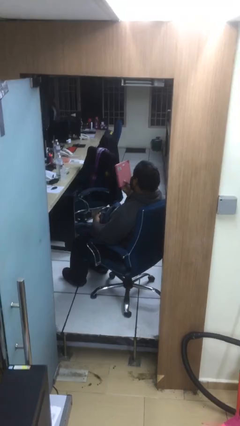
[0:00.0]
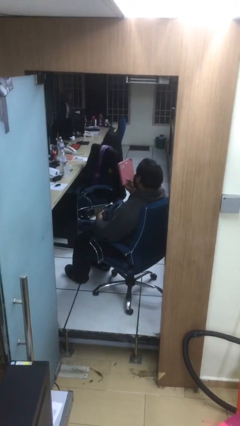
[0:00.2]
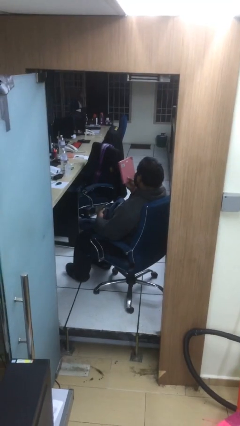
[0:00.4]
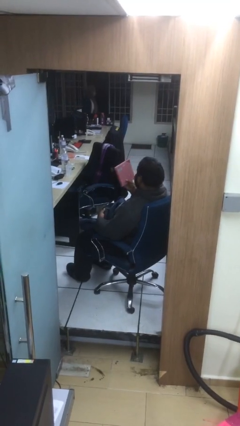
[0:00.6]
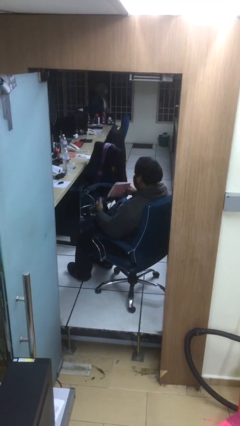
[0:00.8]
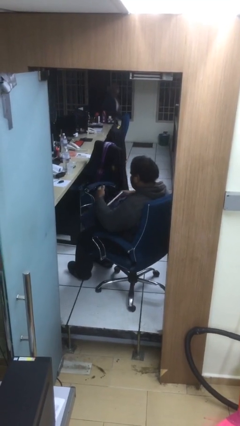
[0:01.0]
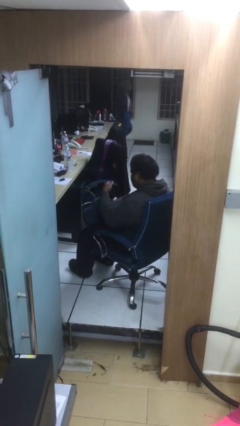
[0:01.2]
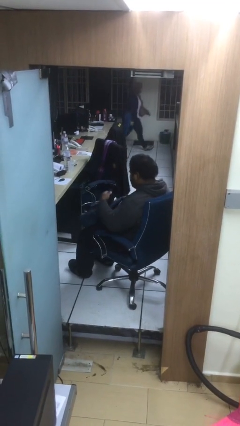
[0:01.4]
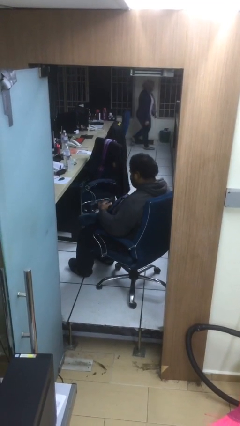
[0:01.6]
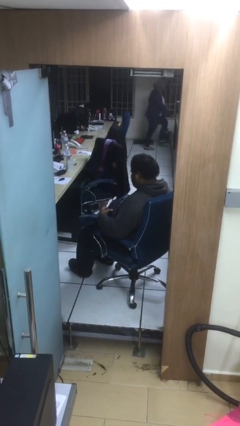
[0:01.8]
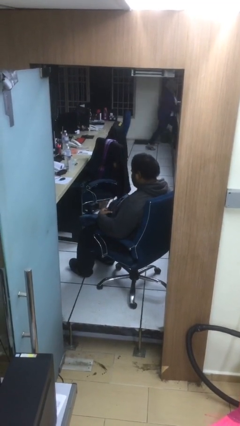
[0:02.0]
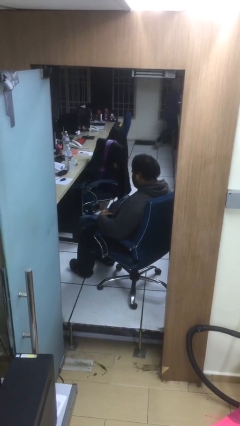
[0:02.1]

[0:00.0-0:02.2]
person puts object into backpack

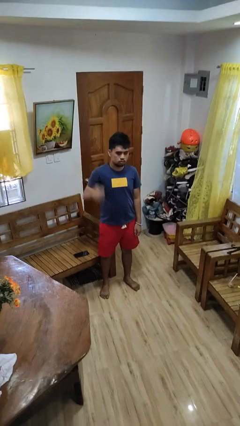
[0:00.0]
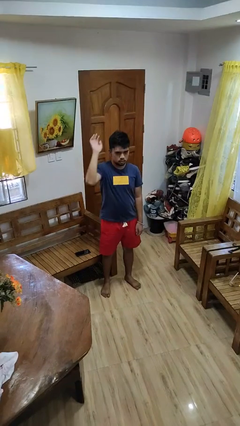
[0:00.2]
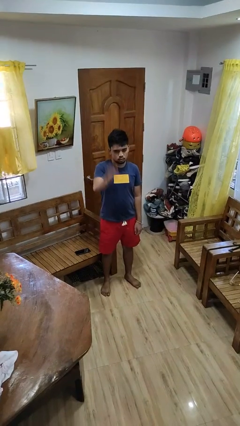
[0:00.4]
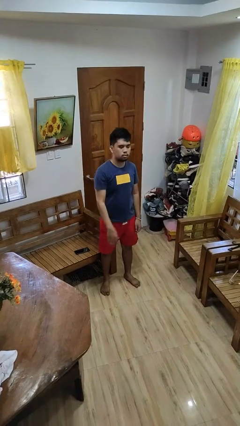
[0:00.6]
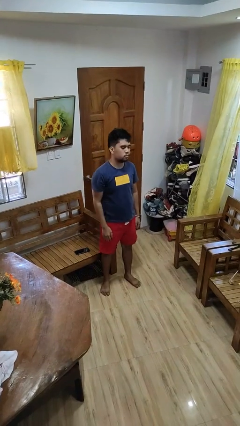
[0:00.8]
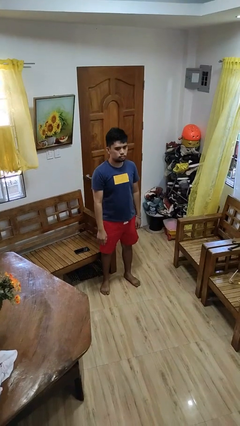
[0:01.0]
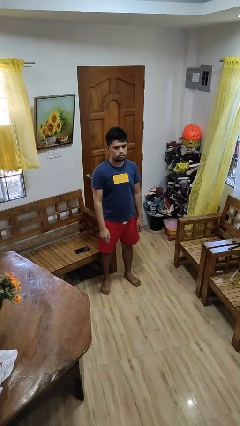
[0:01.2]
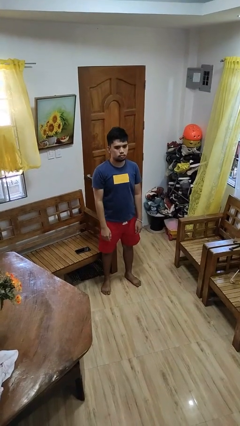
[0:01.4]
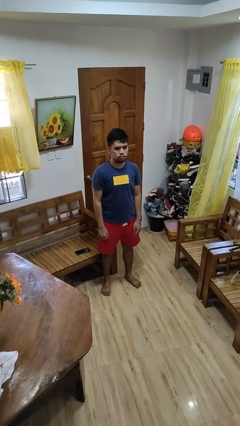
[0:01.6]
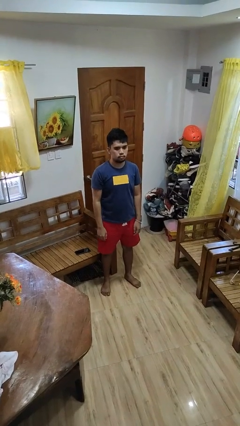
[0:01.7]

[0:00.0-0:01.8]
person gestures swipe down

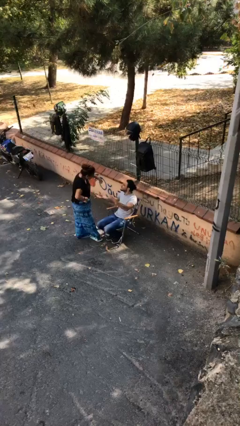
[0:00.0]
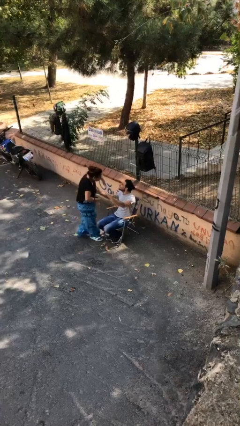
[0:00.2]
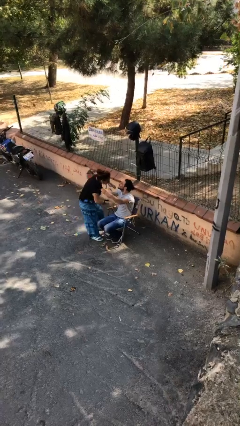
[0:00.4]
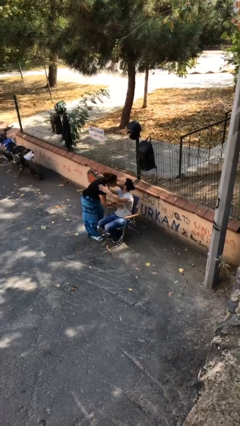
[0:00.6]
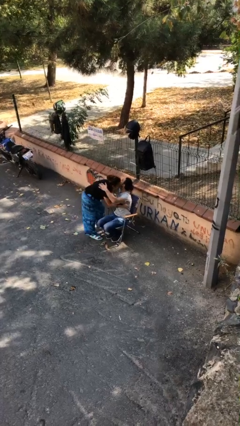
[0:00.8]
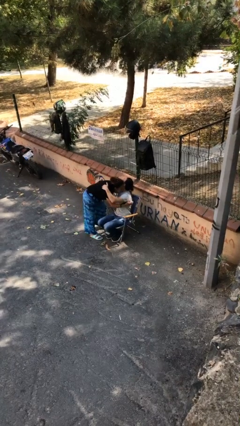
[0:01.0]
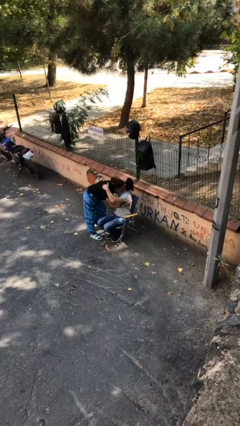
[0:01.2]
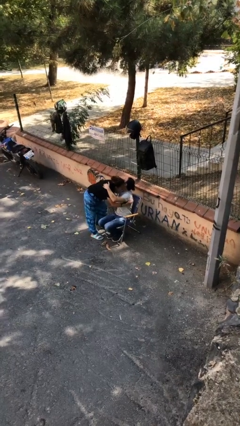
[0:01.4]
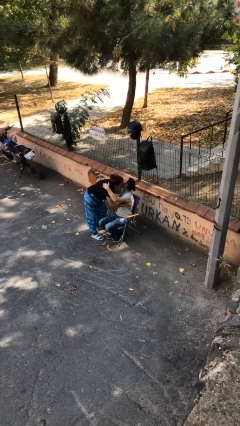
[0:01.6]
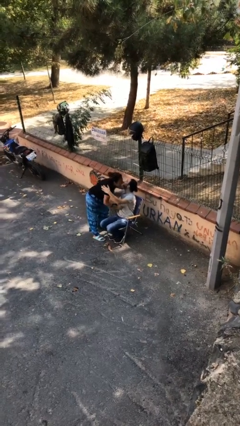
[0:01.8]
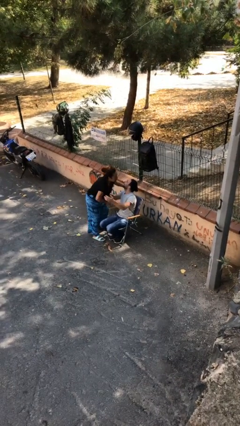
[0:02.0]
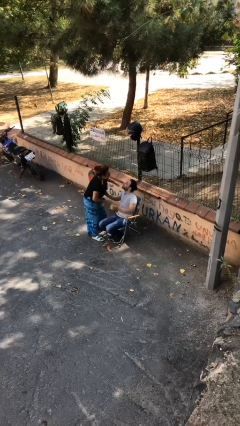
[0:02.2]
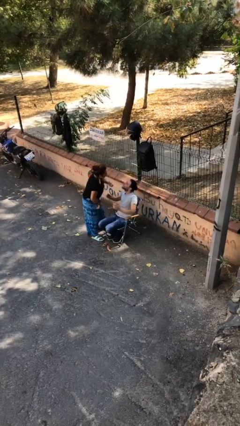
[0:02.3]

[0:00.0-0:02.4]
person embraces person

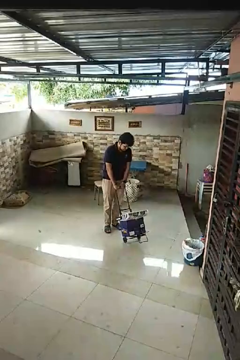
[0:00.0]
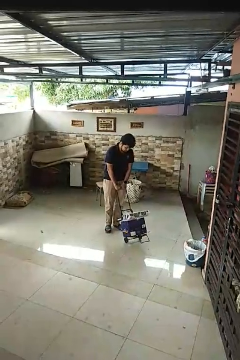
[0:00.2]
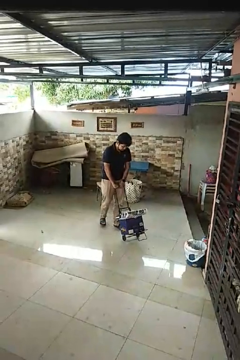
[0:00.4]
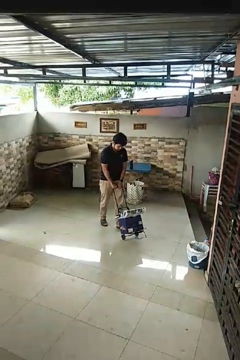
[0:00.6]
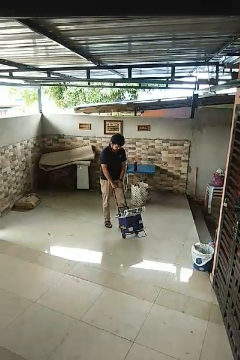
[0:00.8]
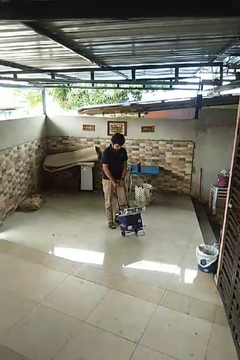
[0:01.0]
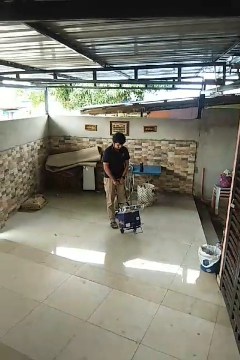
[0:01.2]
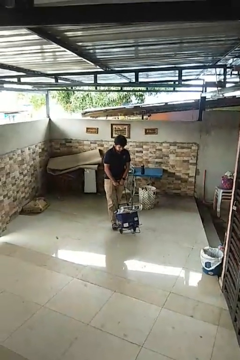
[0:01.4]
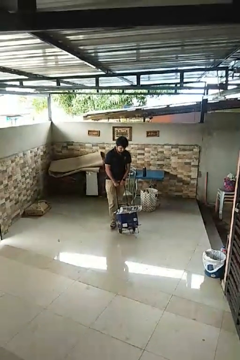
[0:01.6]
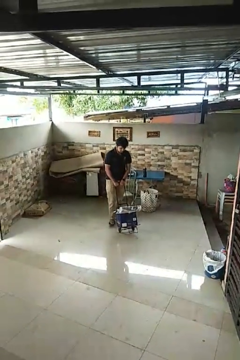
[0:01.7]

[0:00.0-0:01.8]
person pulls wheeled cart

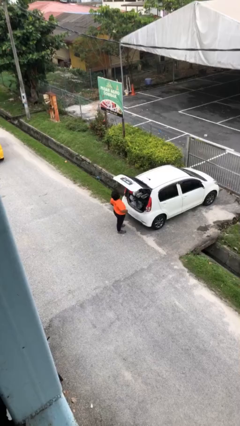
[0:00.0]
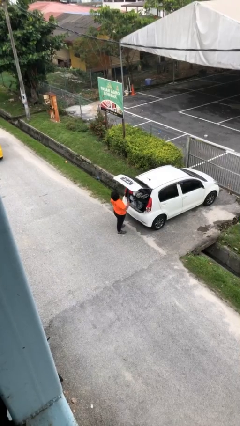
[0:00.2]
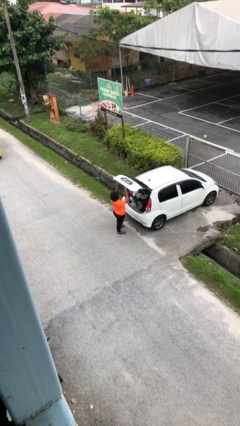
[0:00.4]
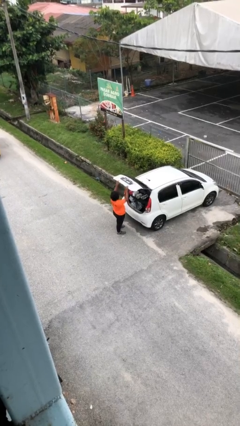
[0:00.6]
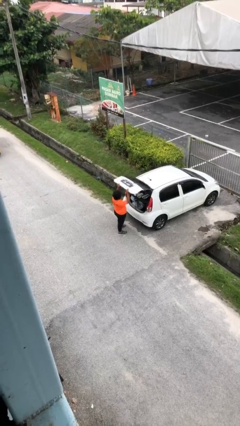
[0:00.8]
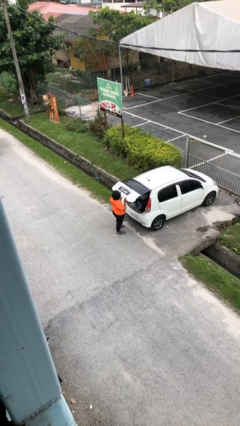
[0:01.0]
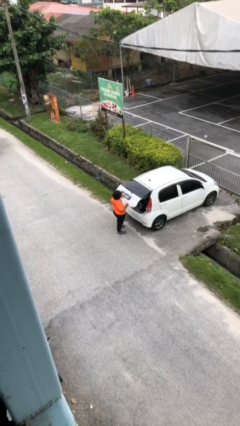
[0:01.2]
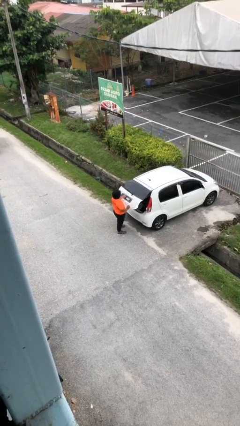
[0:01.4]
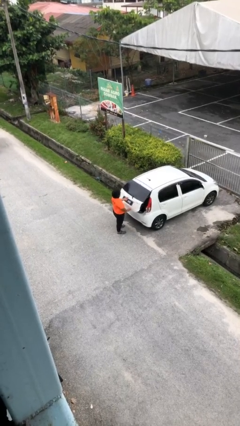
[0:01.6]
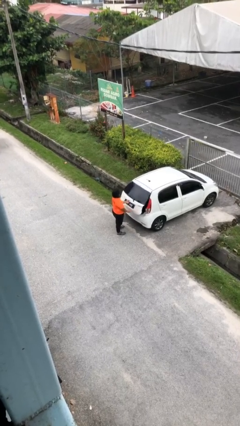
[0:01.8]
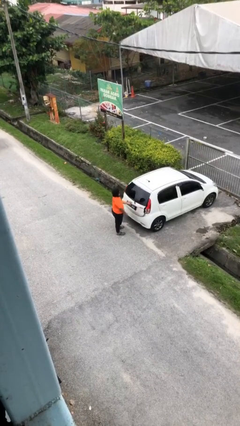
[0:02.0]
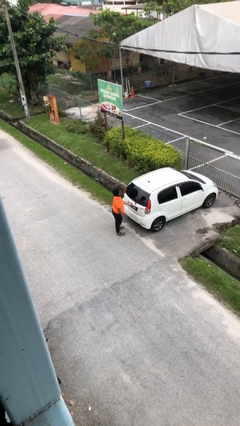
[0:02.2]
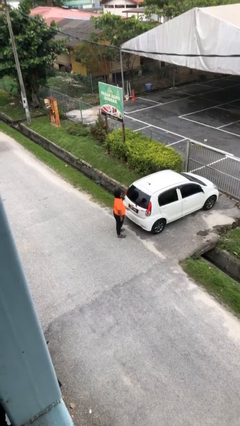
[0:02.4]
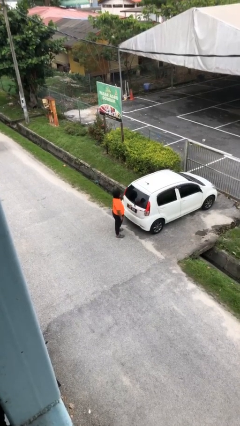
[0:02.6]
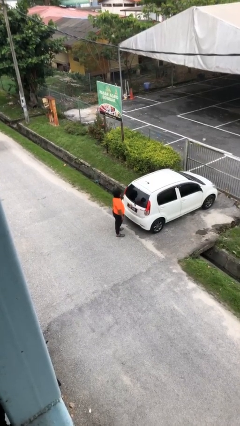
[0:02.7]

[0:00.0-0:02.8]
person closes car trunk

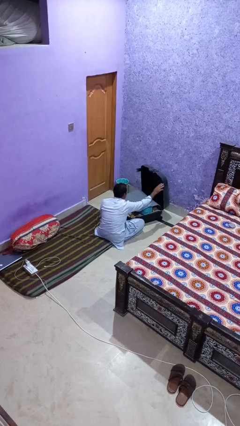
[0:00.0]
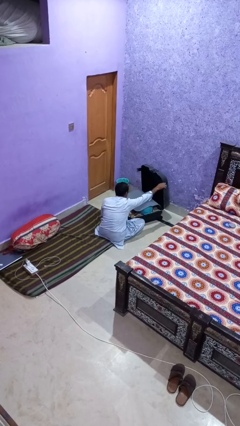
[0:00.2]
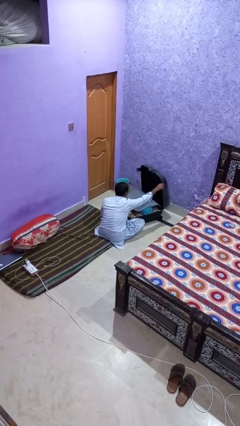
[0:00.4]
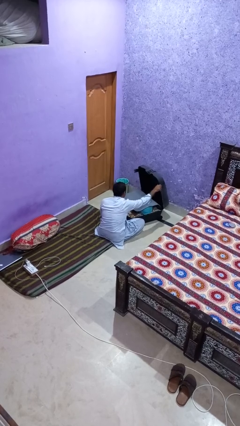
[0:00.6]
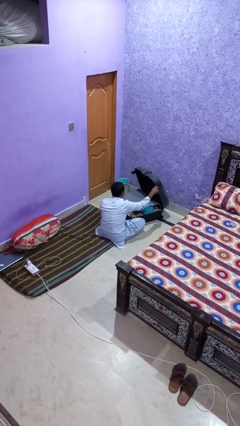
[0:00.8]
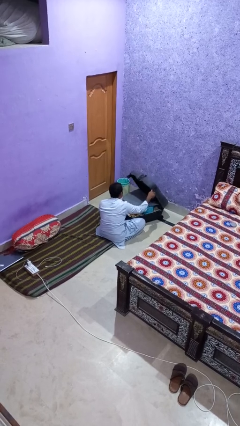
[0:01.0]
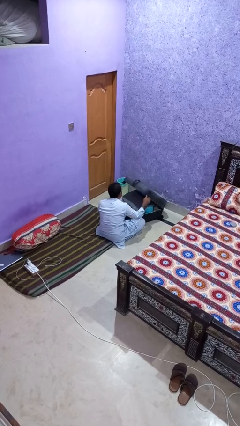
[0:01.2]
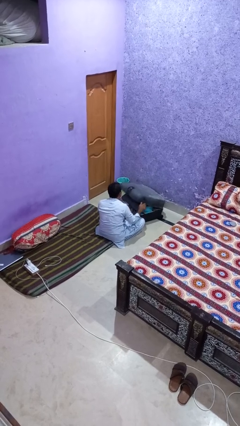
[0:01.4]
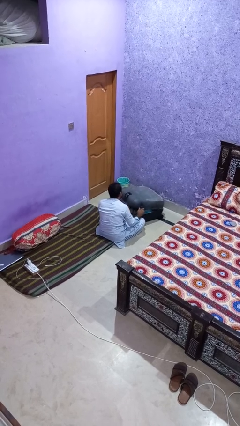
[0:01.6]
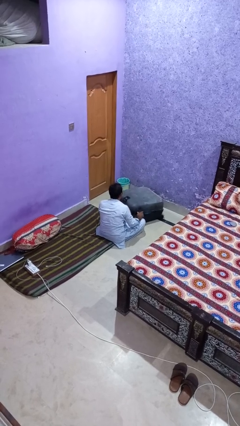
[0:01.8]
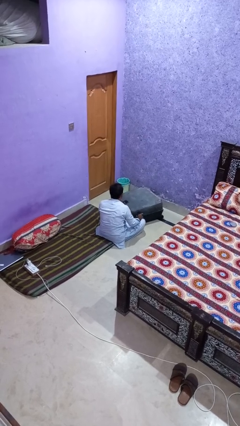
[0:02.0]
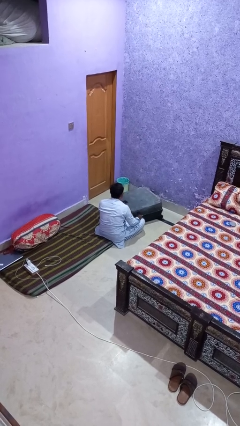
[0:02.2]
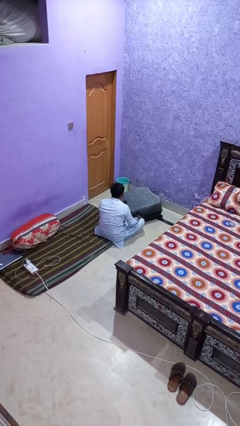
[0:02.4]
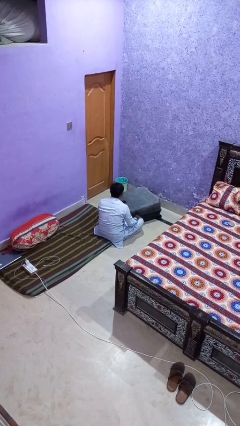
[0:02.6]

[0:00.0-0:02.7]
person closes suitcase

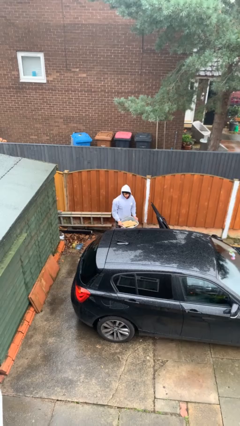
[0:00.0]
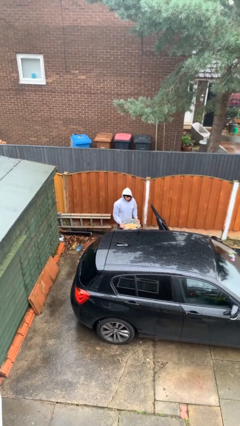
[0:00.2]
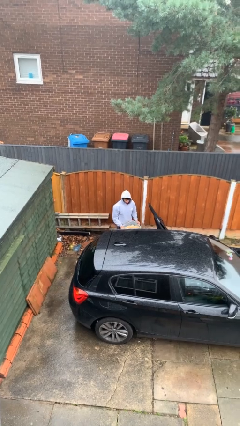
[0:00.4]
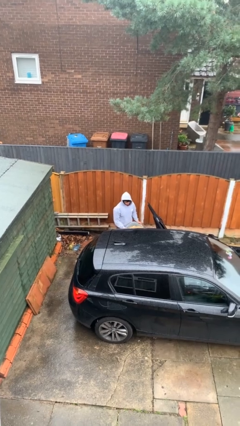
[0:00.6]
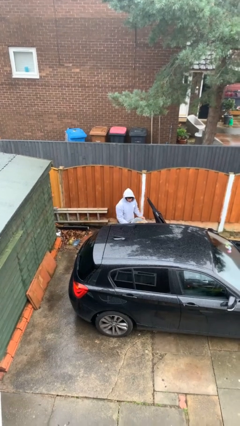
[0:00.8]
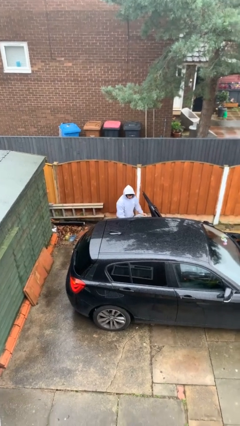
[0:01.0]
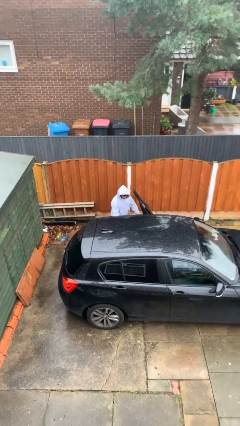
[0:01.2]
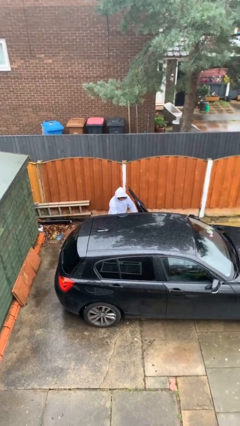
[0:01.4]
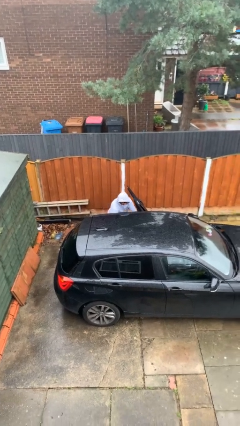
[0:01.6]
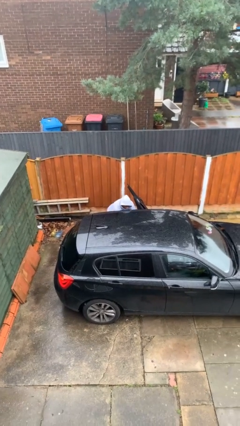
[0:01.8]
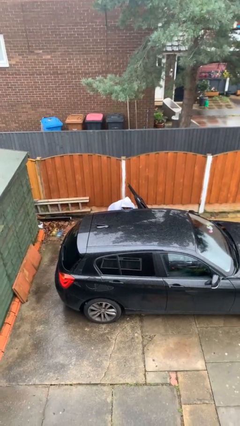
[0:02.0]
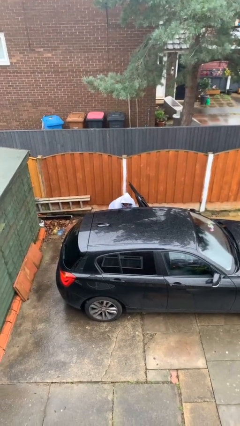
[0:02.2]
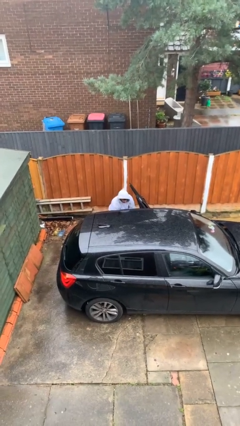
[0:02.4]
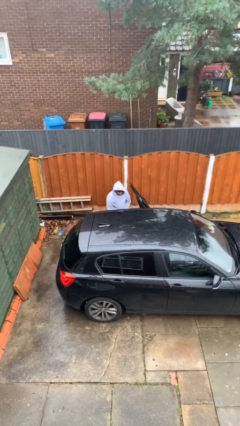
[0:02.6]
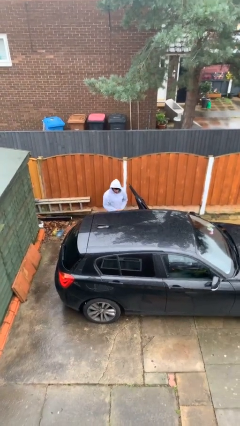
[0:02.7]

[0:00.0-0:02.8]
person loads car

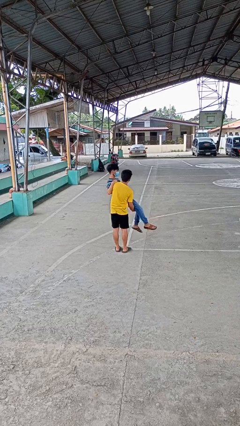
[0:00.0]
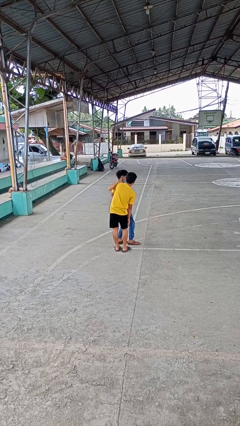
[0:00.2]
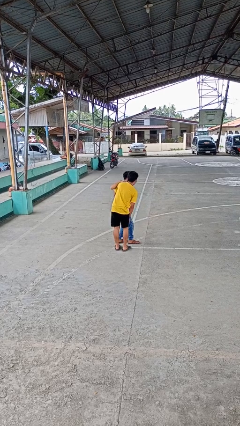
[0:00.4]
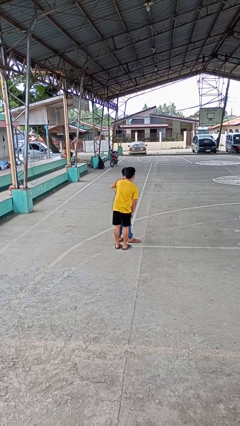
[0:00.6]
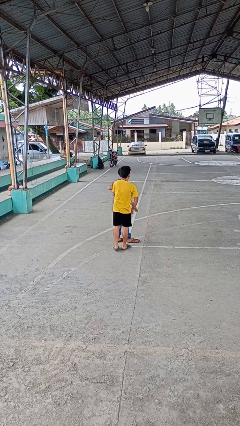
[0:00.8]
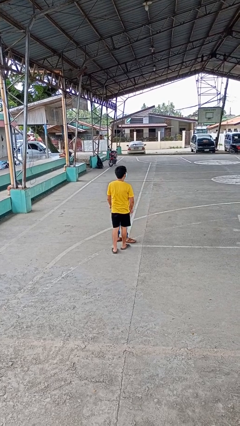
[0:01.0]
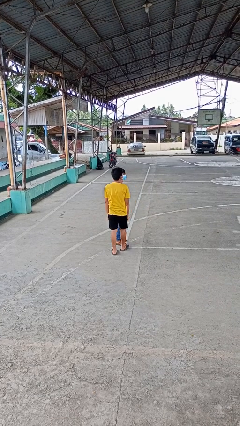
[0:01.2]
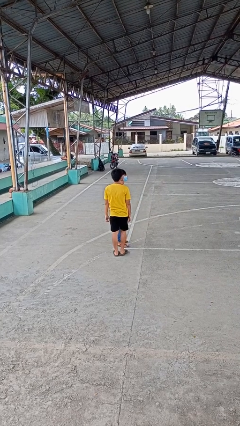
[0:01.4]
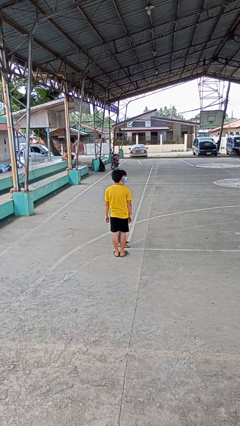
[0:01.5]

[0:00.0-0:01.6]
person puts down person
